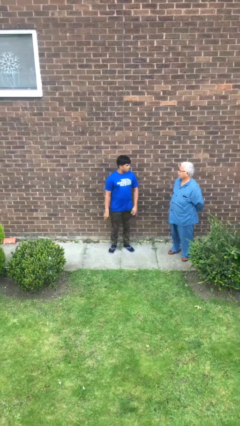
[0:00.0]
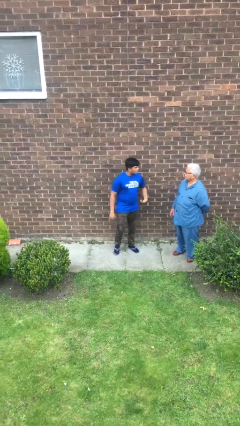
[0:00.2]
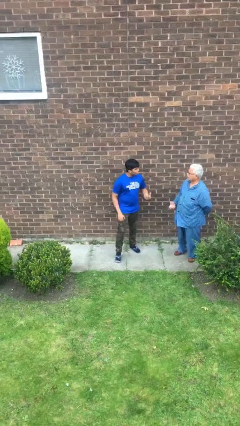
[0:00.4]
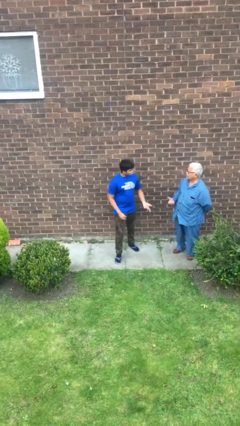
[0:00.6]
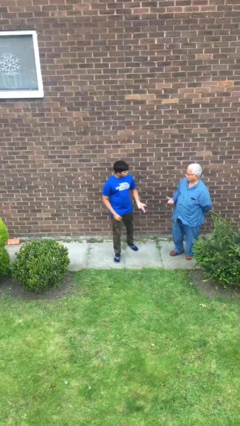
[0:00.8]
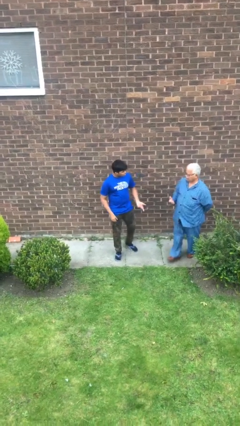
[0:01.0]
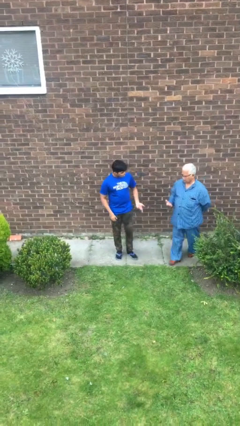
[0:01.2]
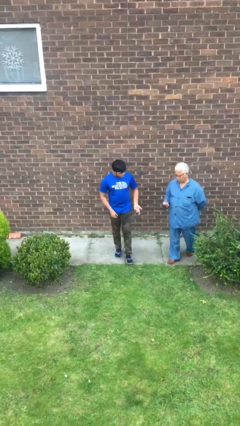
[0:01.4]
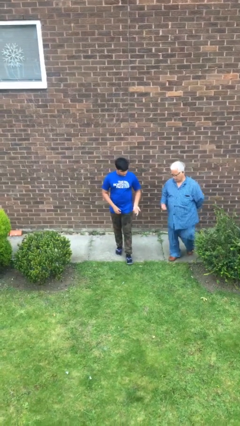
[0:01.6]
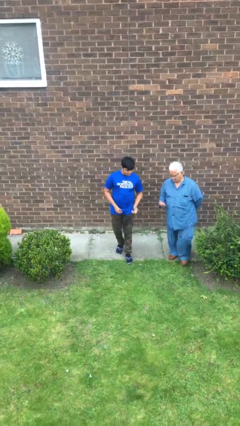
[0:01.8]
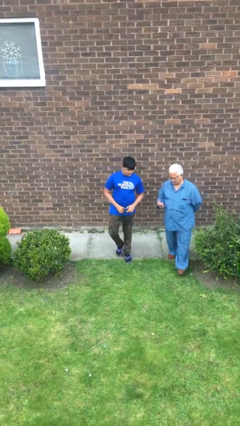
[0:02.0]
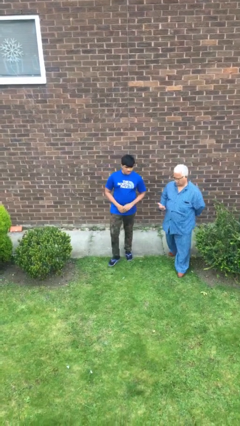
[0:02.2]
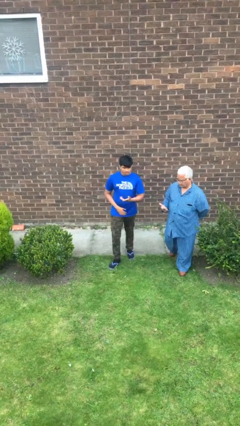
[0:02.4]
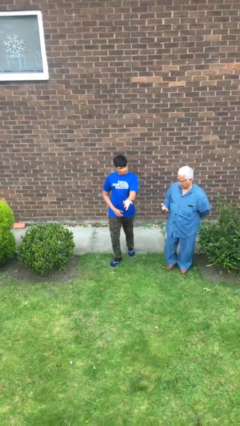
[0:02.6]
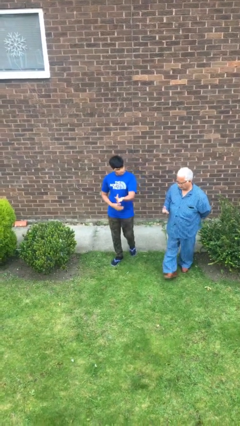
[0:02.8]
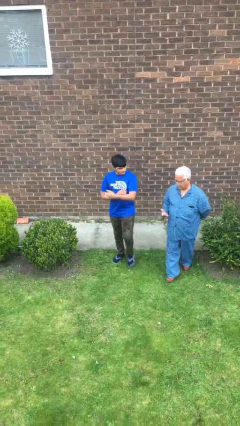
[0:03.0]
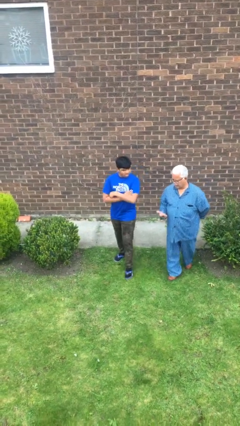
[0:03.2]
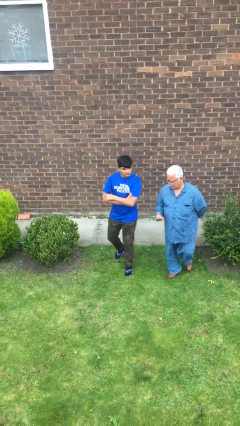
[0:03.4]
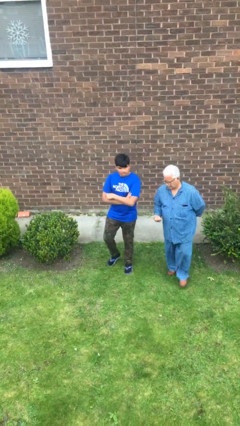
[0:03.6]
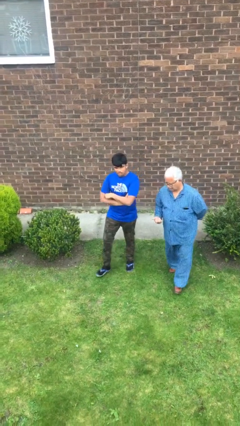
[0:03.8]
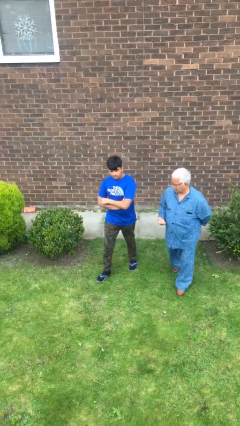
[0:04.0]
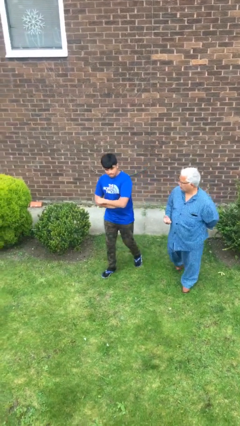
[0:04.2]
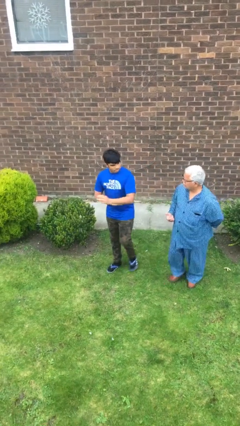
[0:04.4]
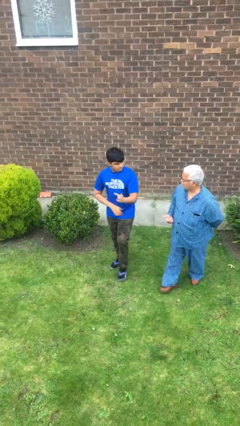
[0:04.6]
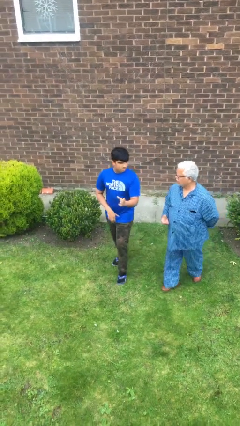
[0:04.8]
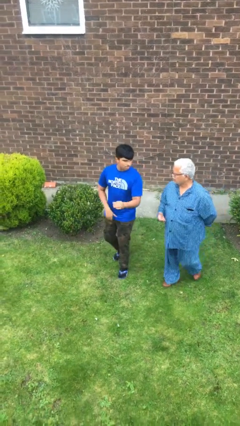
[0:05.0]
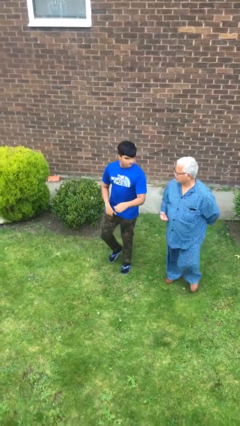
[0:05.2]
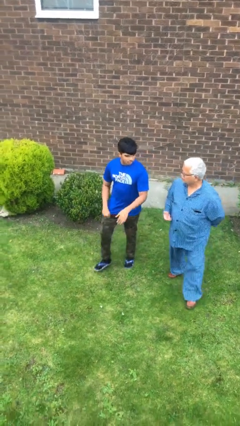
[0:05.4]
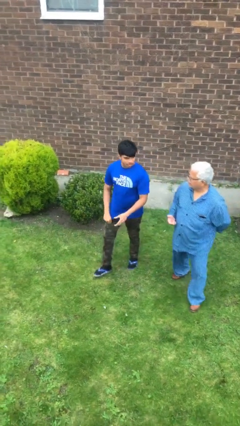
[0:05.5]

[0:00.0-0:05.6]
person talks to person

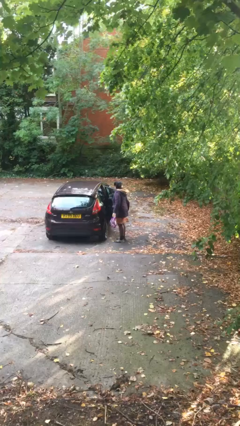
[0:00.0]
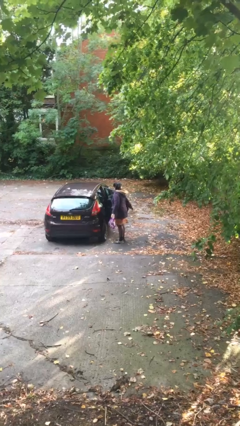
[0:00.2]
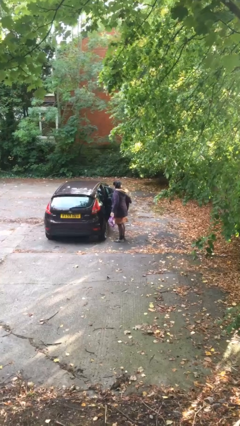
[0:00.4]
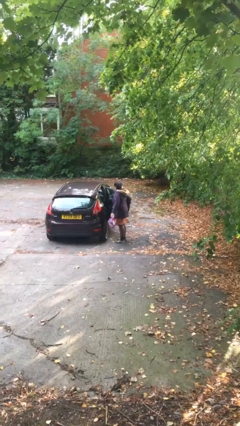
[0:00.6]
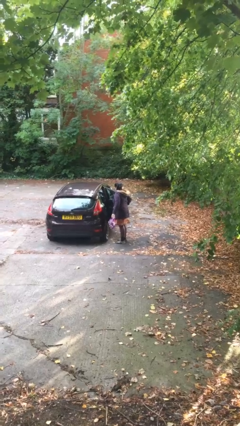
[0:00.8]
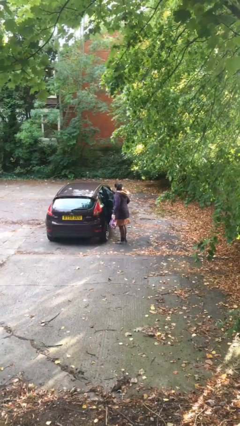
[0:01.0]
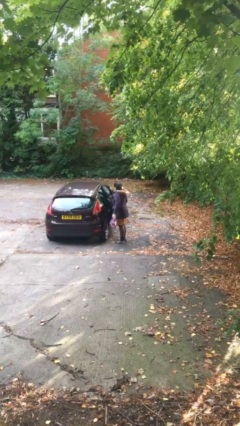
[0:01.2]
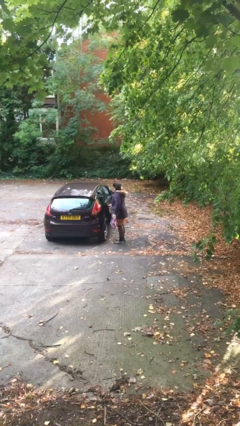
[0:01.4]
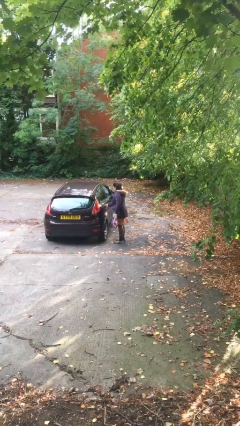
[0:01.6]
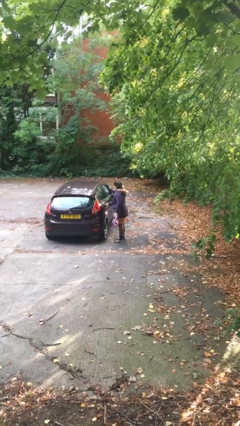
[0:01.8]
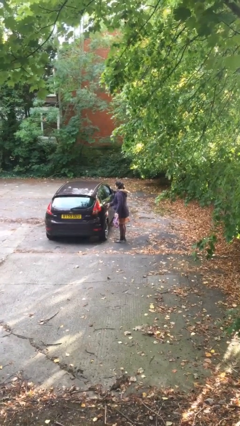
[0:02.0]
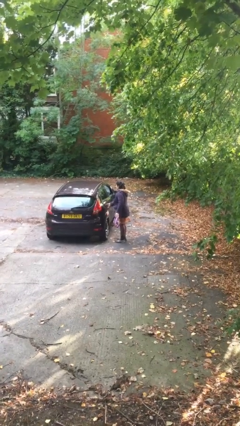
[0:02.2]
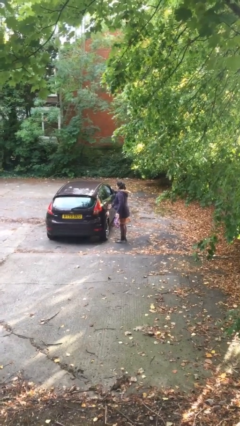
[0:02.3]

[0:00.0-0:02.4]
person closes car door

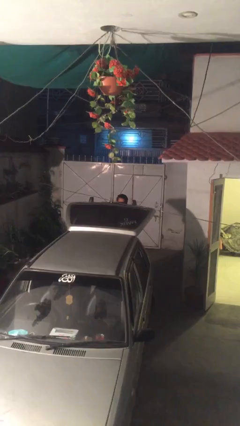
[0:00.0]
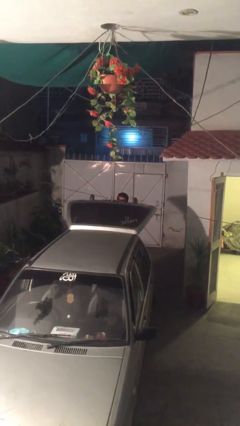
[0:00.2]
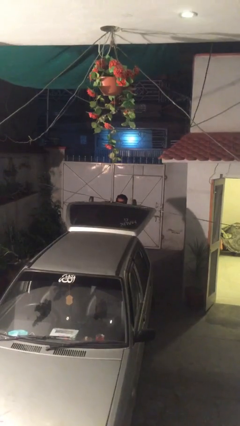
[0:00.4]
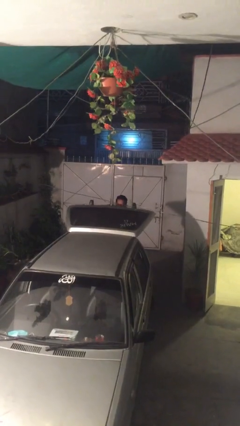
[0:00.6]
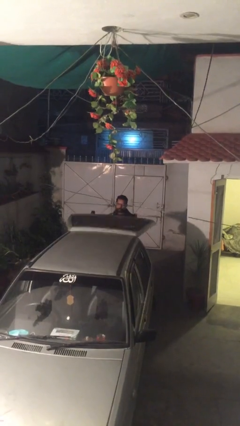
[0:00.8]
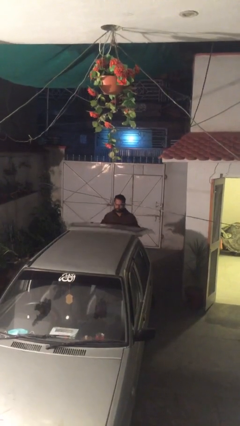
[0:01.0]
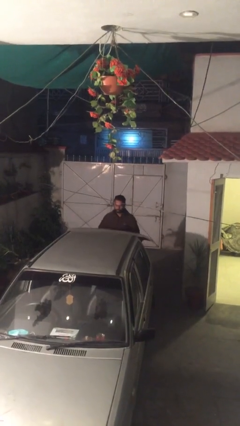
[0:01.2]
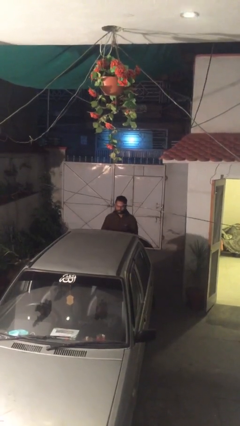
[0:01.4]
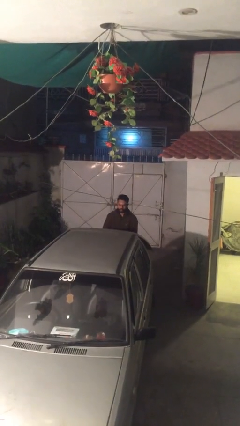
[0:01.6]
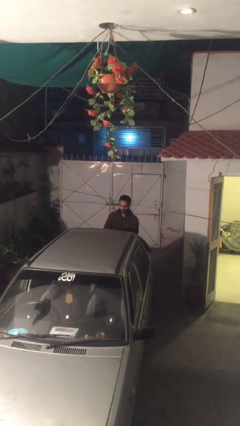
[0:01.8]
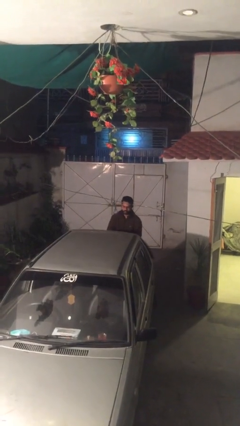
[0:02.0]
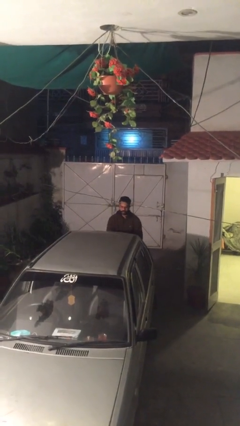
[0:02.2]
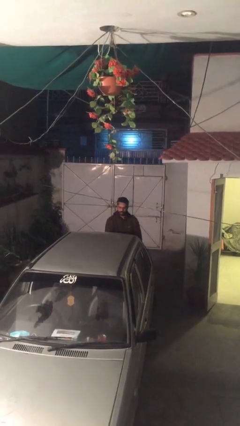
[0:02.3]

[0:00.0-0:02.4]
person closes car trunk

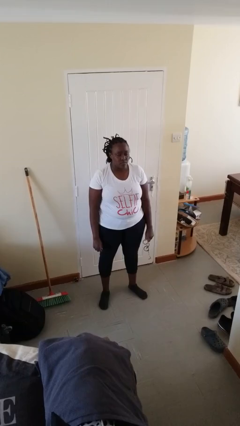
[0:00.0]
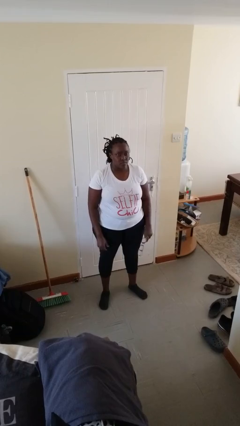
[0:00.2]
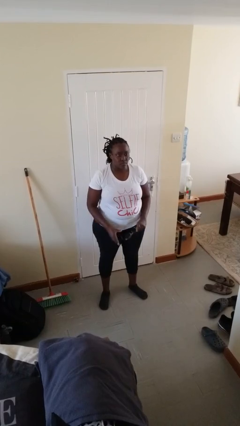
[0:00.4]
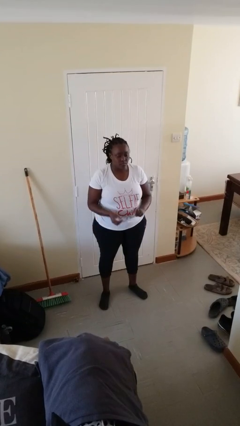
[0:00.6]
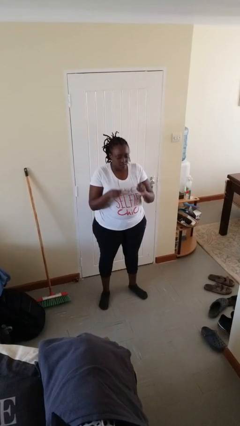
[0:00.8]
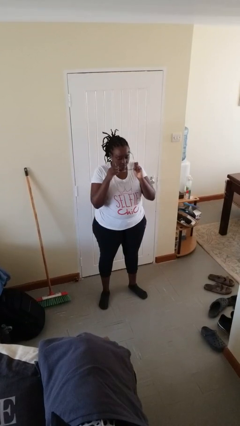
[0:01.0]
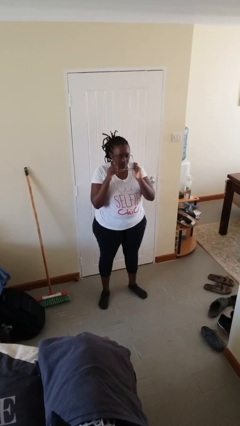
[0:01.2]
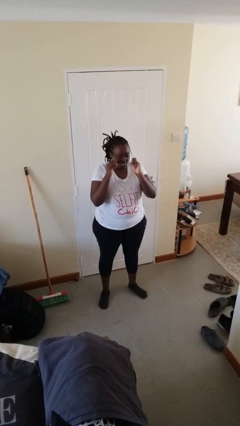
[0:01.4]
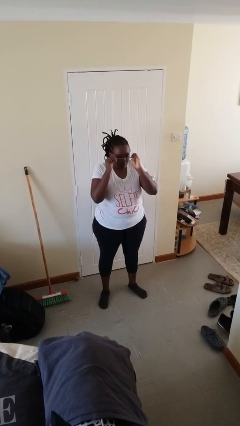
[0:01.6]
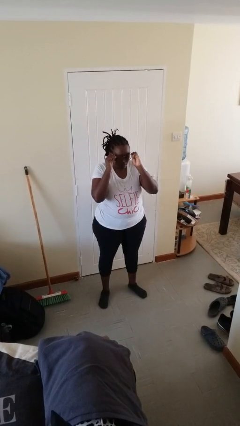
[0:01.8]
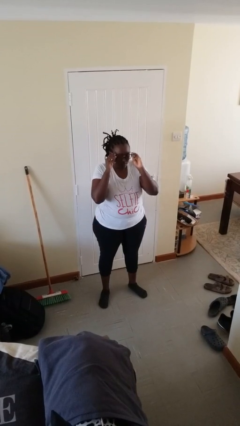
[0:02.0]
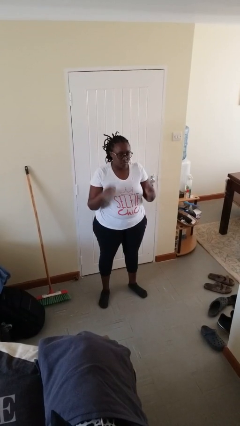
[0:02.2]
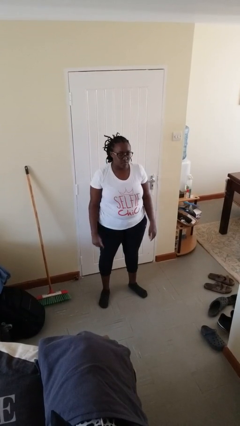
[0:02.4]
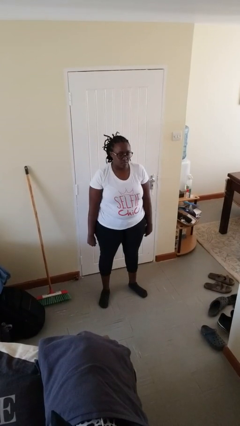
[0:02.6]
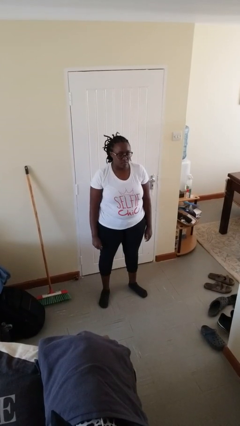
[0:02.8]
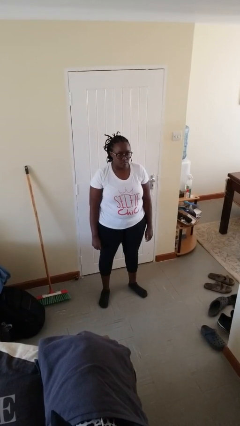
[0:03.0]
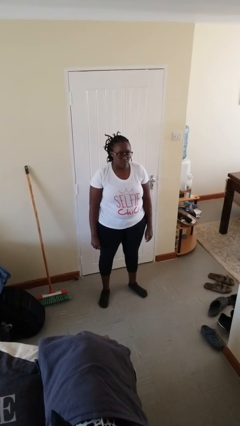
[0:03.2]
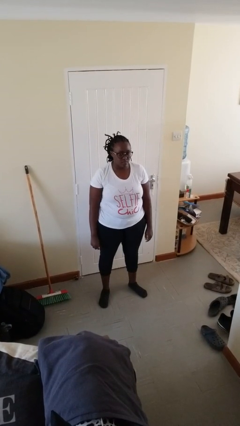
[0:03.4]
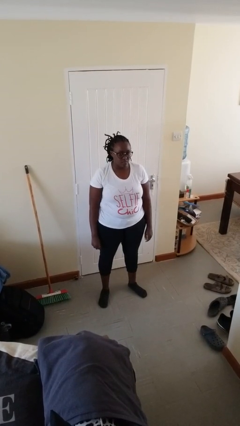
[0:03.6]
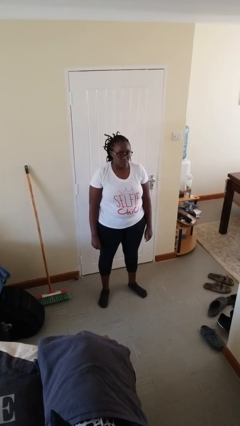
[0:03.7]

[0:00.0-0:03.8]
person puts on glasses

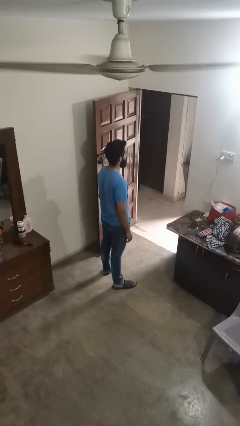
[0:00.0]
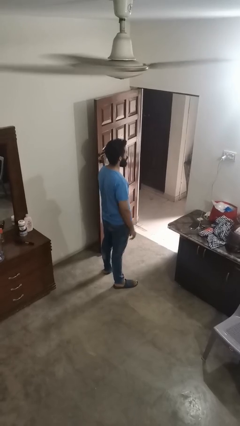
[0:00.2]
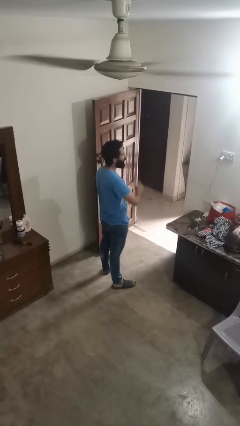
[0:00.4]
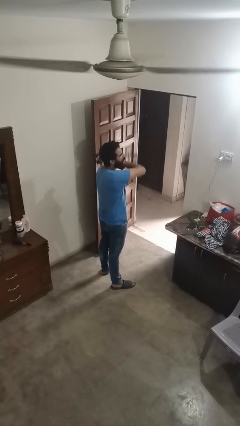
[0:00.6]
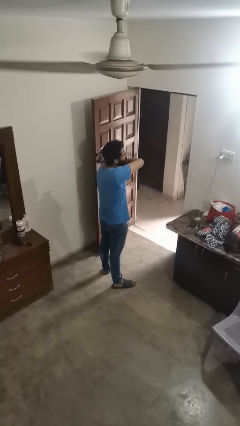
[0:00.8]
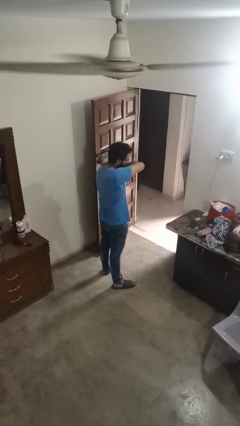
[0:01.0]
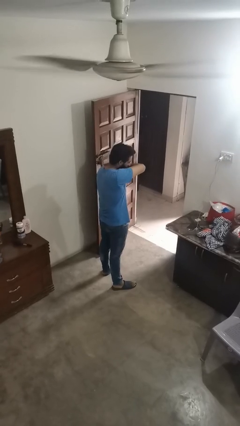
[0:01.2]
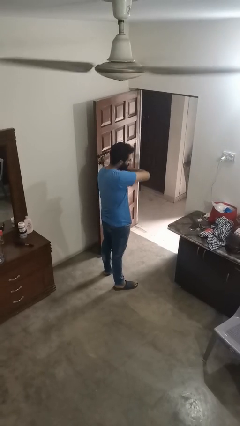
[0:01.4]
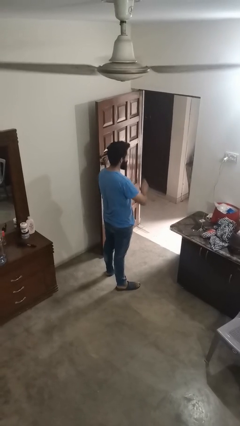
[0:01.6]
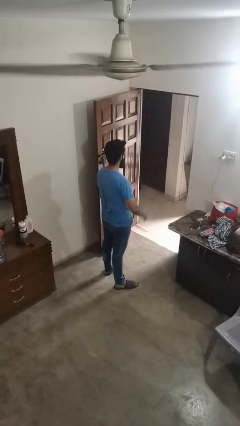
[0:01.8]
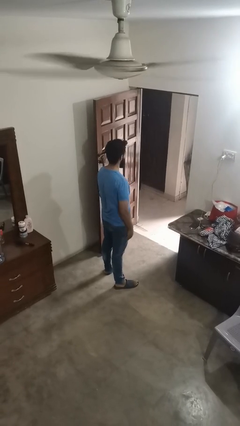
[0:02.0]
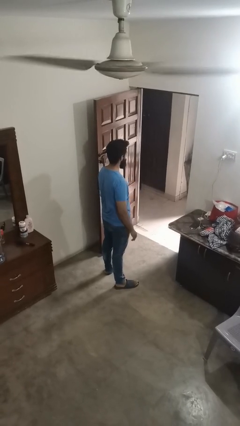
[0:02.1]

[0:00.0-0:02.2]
person sneezes into arm

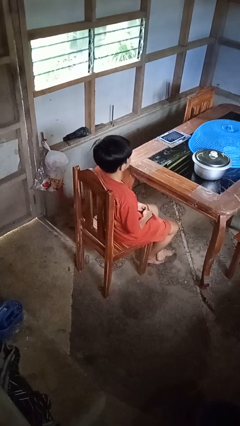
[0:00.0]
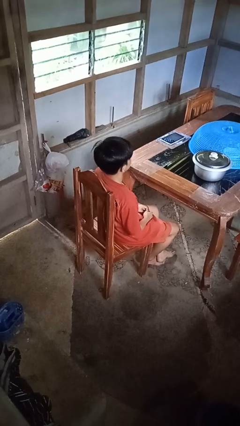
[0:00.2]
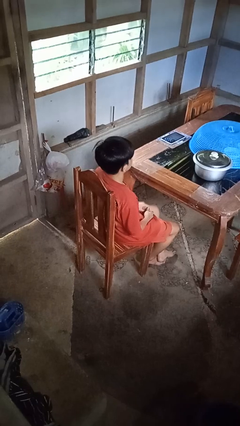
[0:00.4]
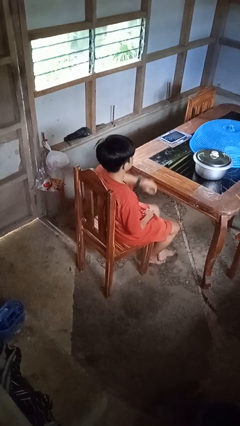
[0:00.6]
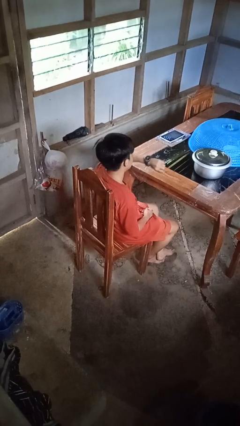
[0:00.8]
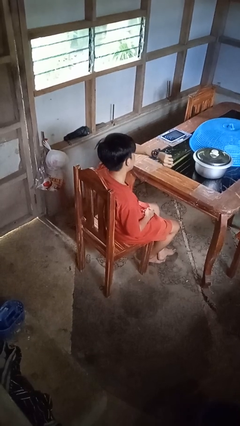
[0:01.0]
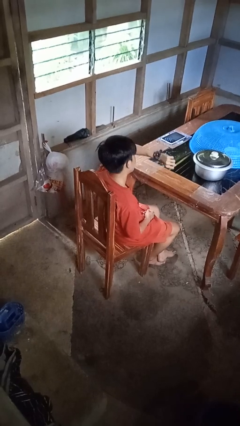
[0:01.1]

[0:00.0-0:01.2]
person looks at wristwatch
